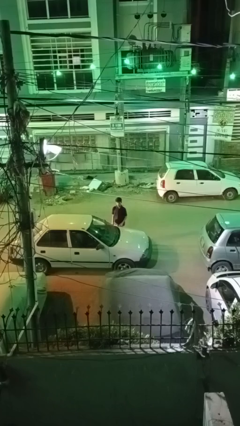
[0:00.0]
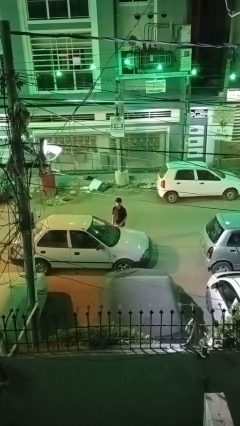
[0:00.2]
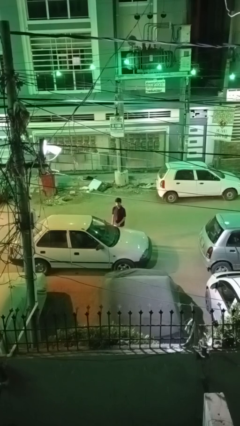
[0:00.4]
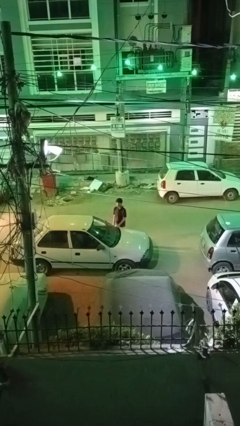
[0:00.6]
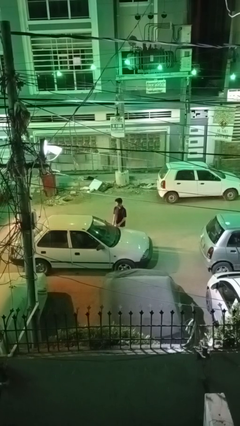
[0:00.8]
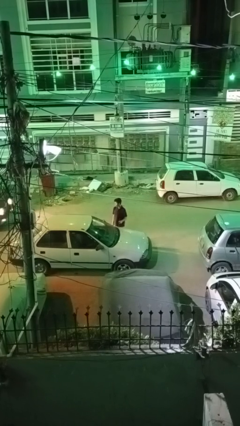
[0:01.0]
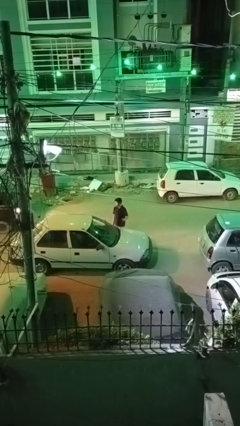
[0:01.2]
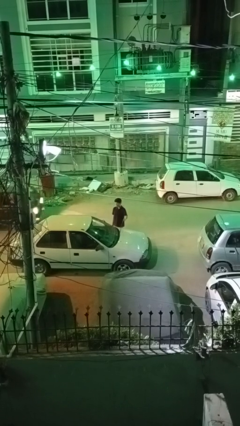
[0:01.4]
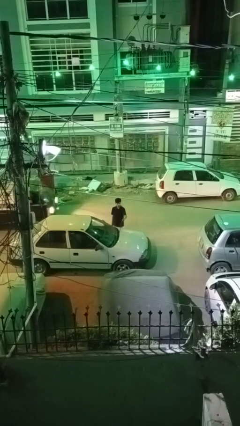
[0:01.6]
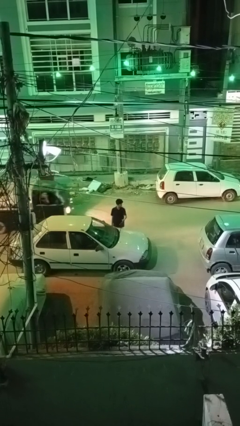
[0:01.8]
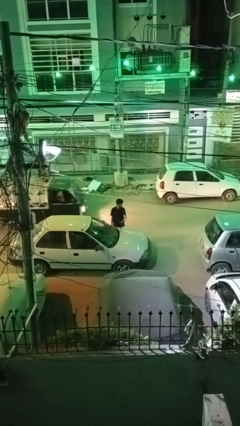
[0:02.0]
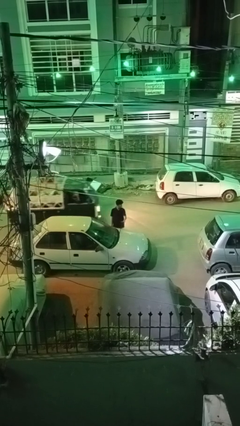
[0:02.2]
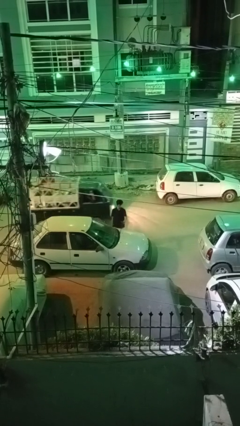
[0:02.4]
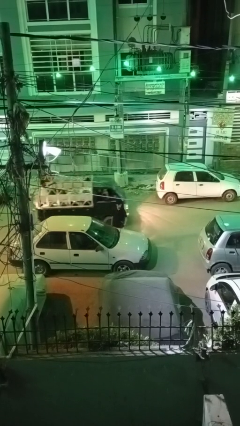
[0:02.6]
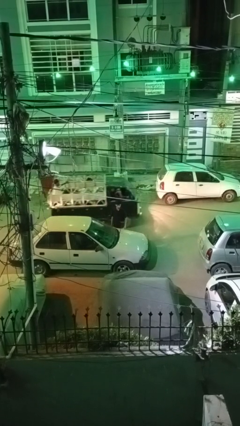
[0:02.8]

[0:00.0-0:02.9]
person flips up car wipers

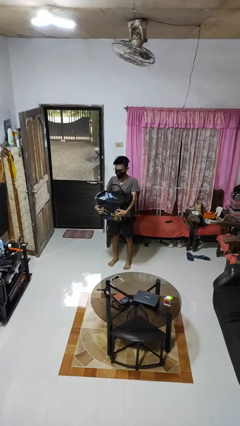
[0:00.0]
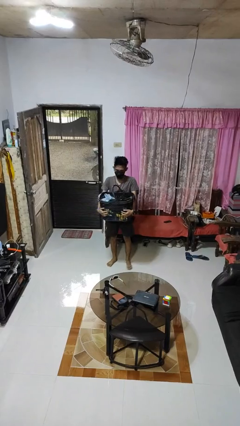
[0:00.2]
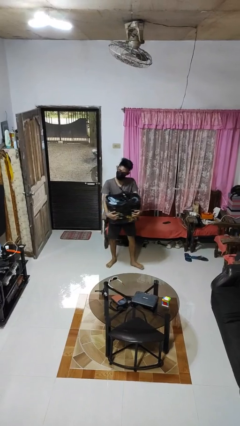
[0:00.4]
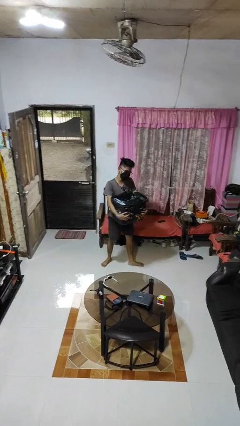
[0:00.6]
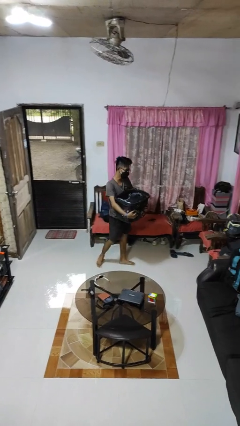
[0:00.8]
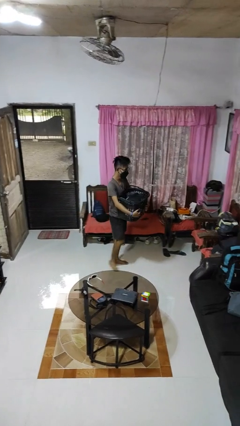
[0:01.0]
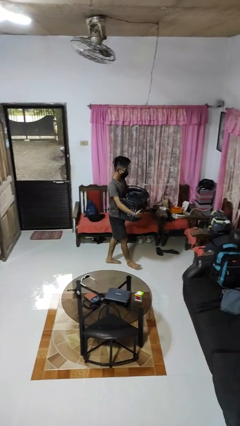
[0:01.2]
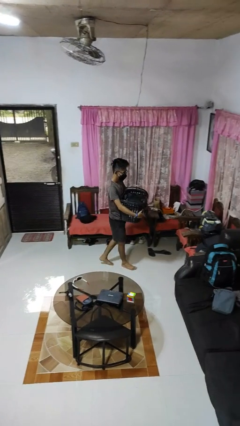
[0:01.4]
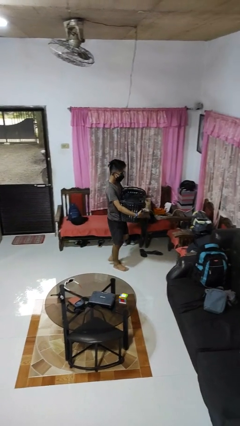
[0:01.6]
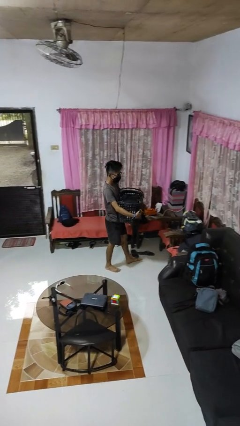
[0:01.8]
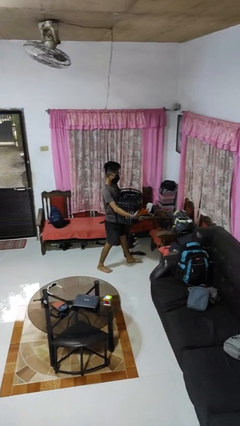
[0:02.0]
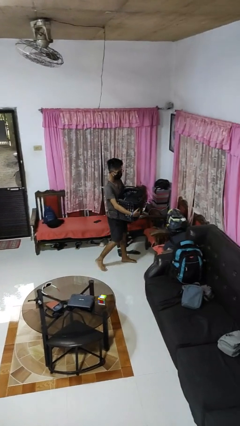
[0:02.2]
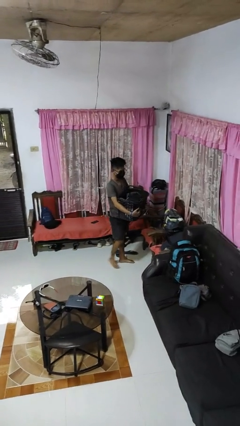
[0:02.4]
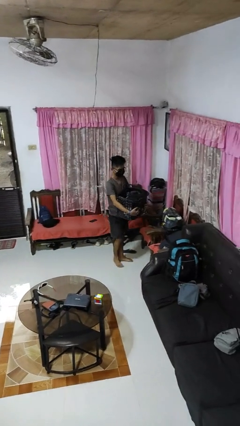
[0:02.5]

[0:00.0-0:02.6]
person carries laundry basket

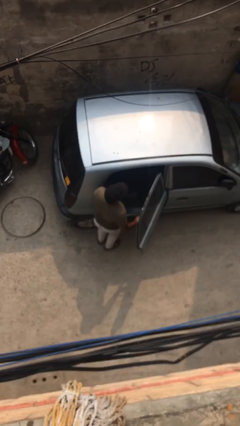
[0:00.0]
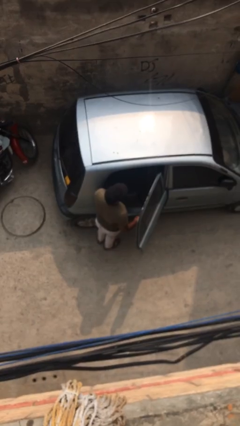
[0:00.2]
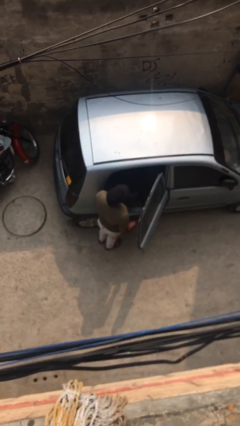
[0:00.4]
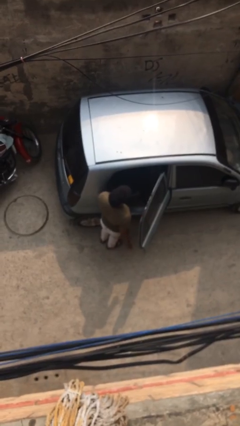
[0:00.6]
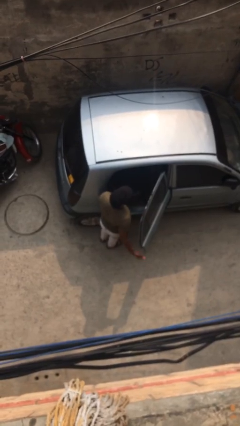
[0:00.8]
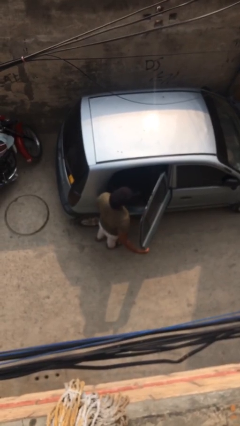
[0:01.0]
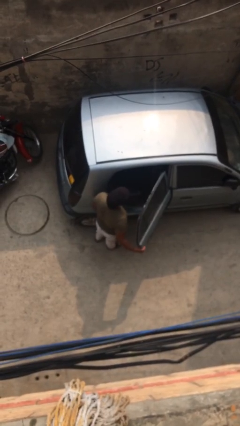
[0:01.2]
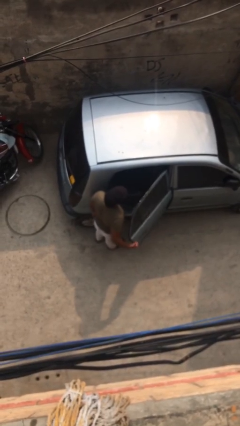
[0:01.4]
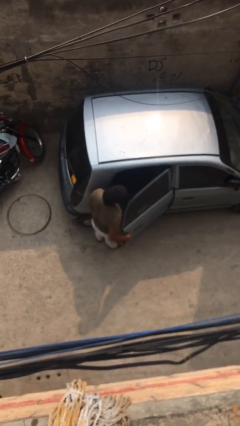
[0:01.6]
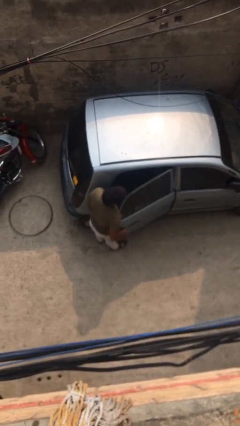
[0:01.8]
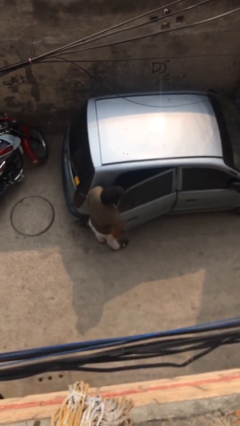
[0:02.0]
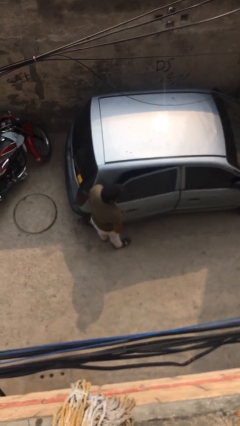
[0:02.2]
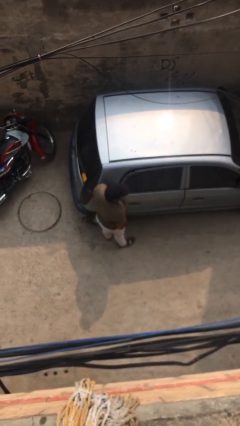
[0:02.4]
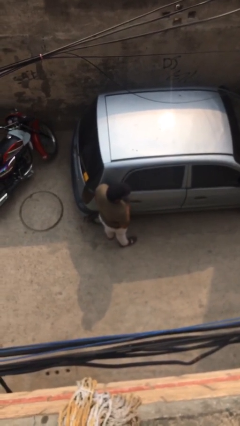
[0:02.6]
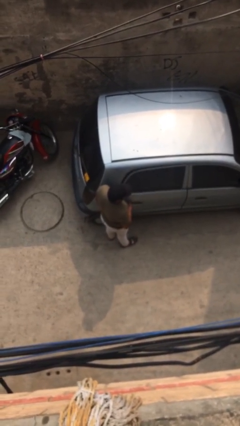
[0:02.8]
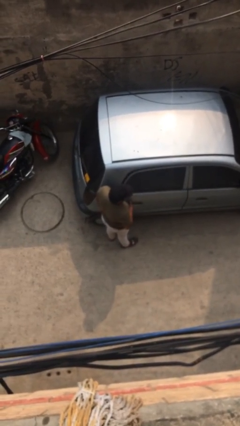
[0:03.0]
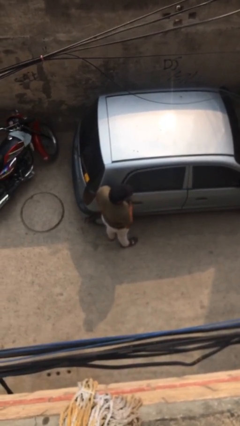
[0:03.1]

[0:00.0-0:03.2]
person closes car door

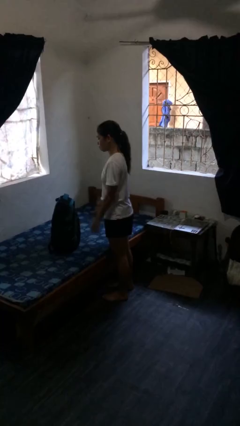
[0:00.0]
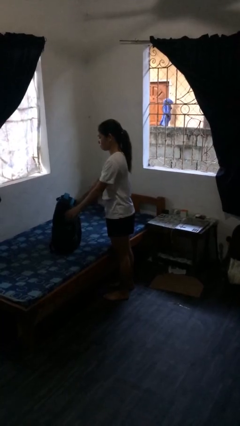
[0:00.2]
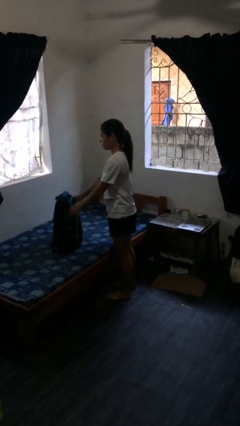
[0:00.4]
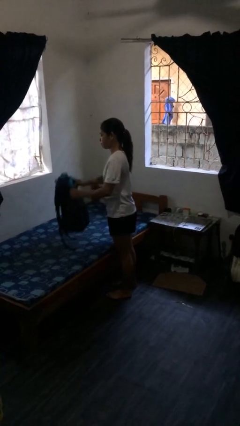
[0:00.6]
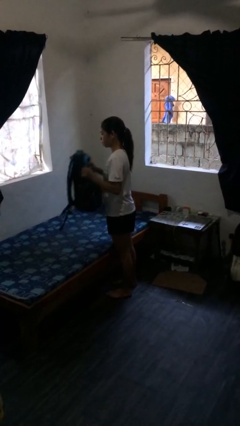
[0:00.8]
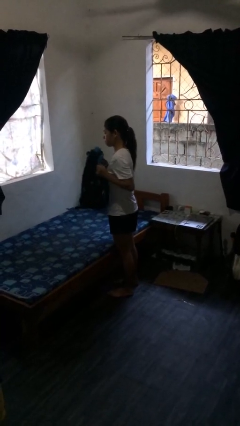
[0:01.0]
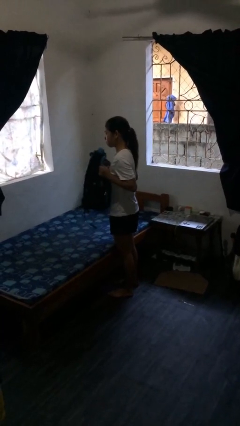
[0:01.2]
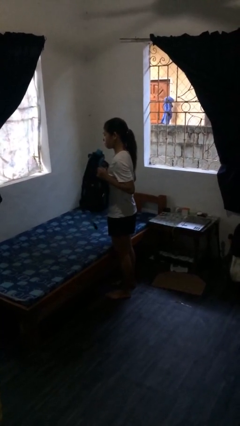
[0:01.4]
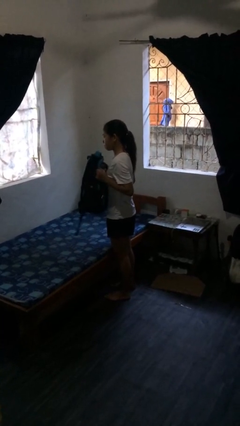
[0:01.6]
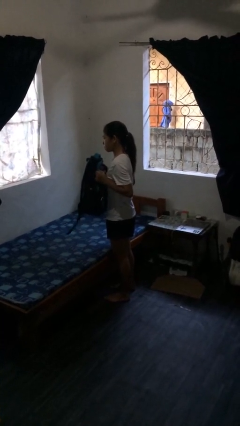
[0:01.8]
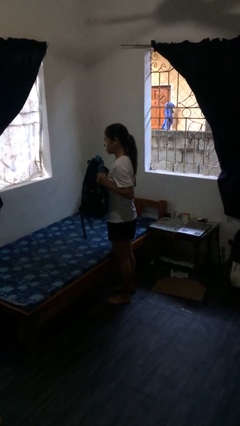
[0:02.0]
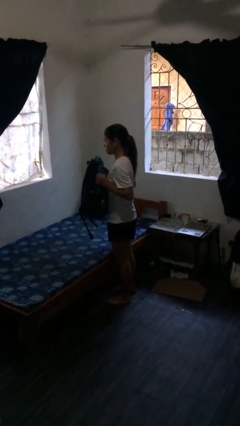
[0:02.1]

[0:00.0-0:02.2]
person picks up object from bed

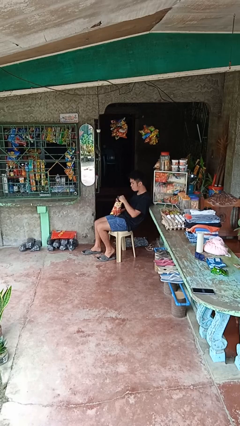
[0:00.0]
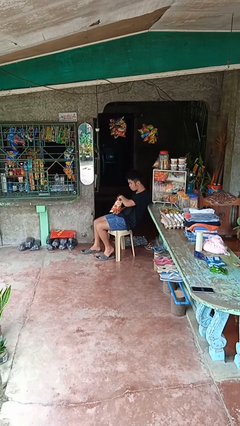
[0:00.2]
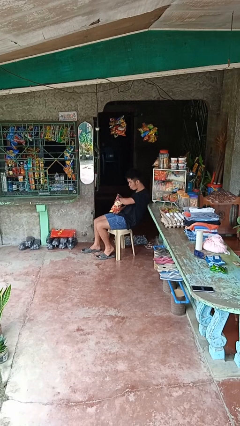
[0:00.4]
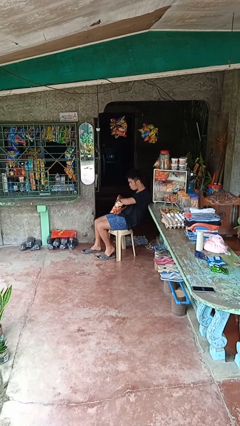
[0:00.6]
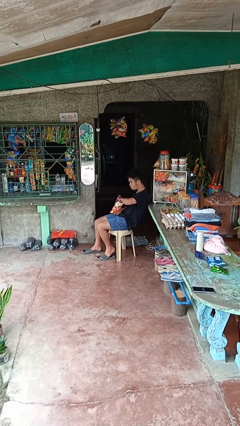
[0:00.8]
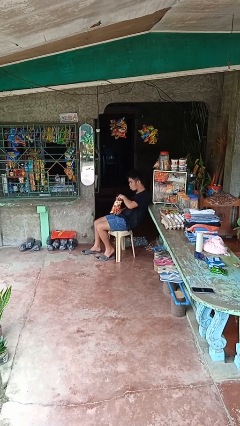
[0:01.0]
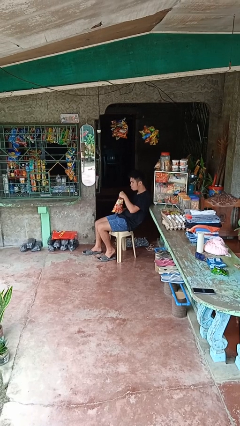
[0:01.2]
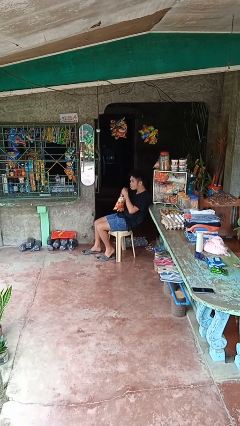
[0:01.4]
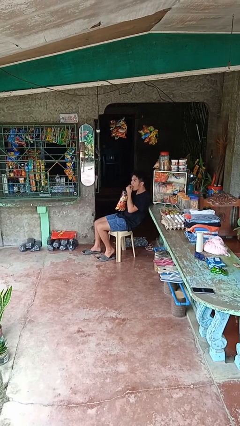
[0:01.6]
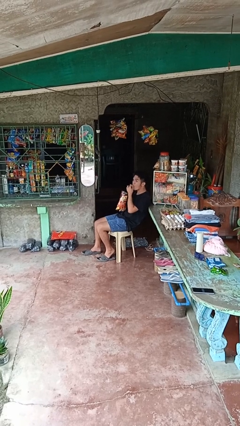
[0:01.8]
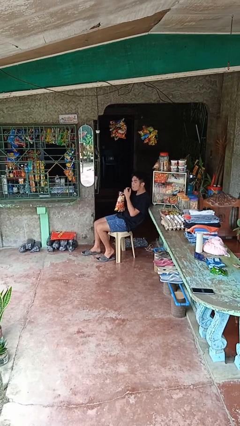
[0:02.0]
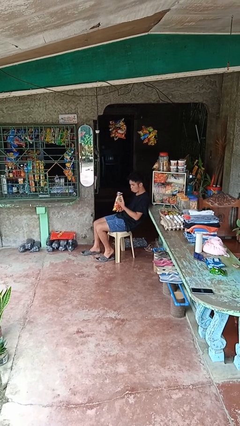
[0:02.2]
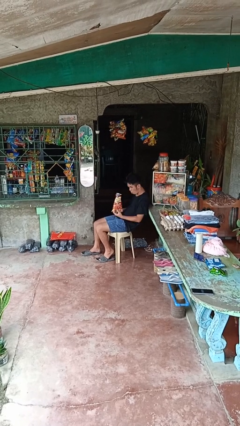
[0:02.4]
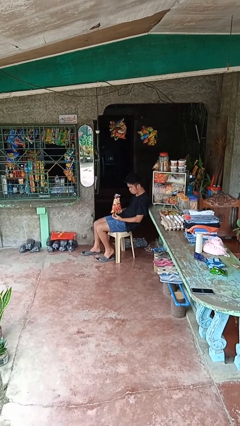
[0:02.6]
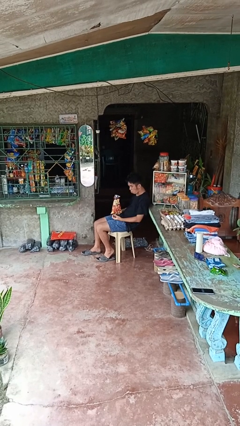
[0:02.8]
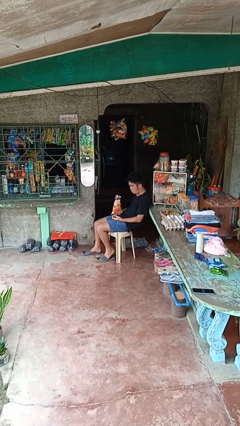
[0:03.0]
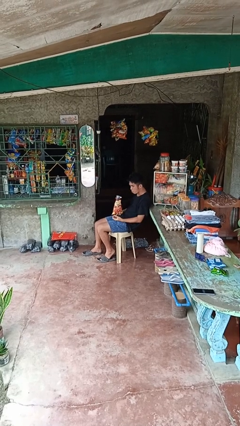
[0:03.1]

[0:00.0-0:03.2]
person eats snack from bag

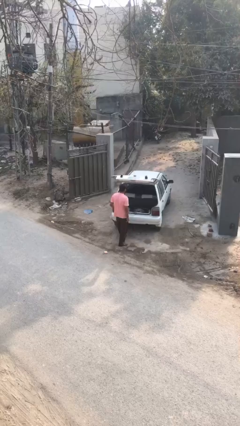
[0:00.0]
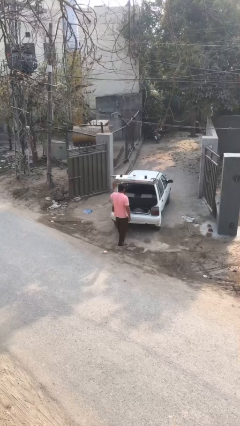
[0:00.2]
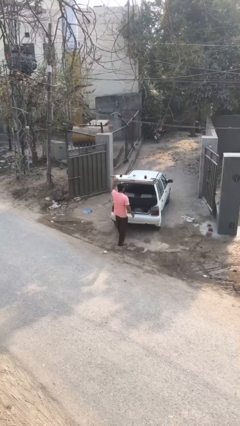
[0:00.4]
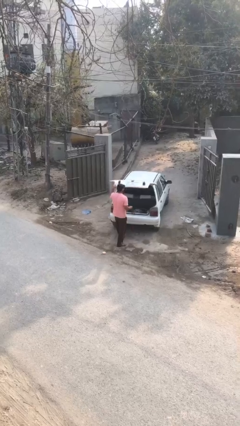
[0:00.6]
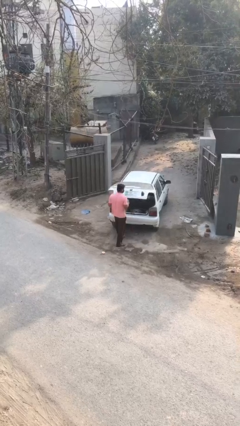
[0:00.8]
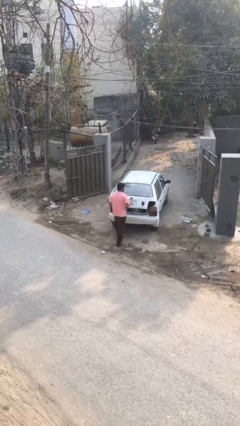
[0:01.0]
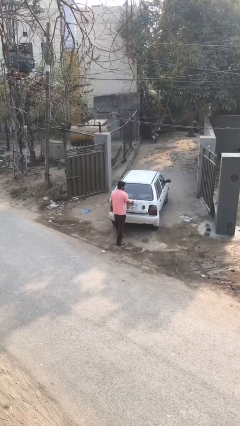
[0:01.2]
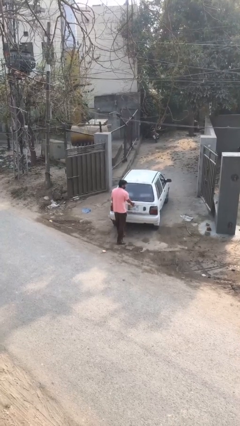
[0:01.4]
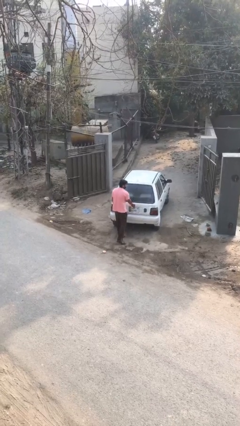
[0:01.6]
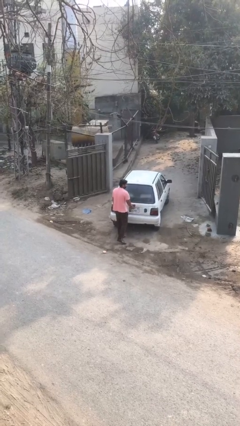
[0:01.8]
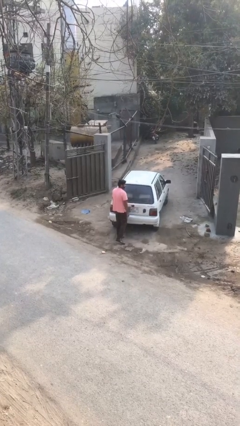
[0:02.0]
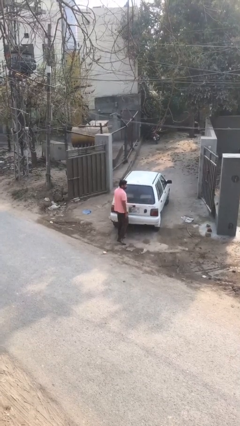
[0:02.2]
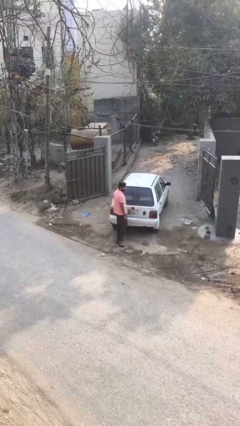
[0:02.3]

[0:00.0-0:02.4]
person closes car trunk

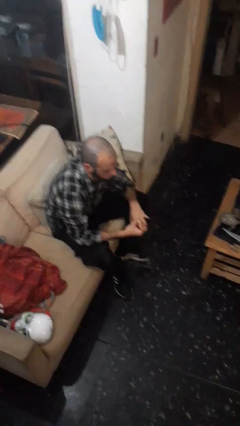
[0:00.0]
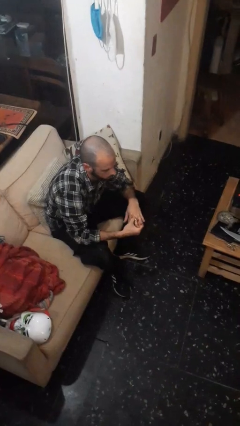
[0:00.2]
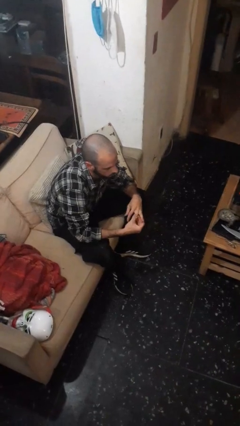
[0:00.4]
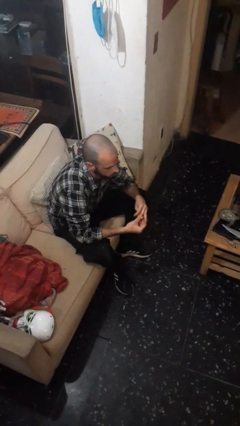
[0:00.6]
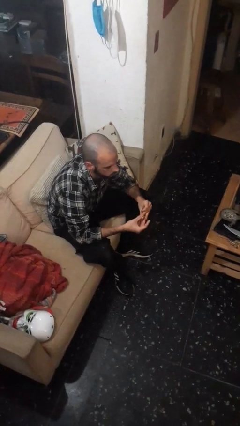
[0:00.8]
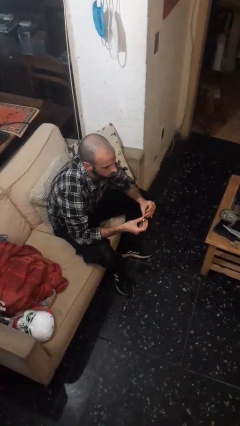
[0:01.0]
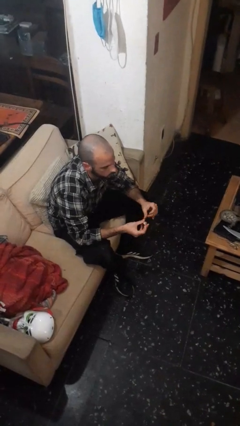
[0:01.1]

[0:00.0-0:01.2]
person takes off ring
